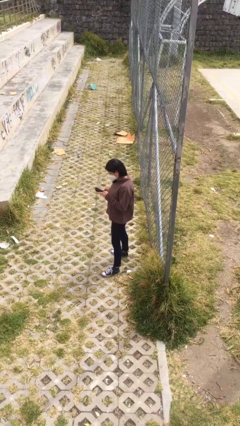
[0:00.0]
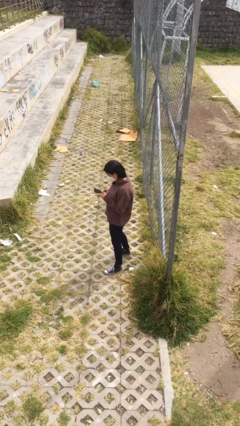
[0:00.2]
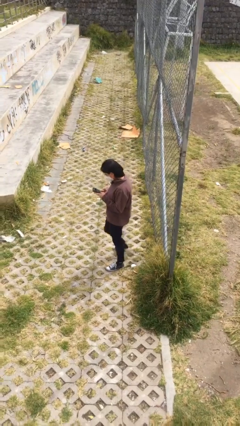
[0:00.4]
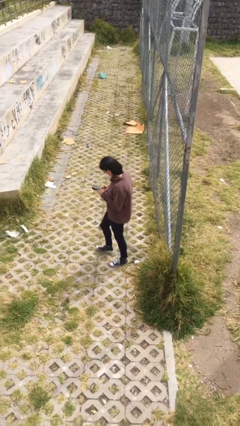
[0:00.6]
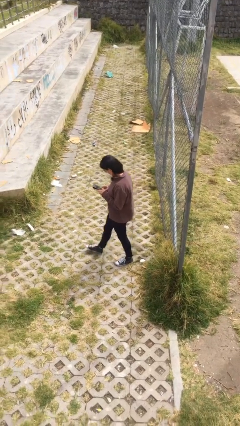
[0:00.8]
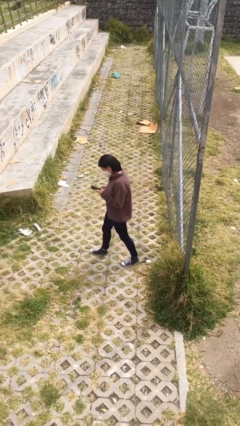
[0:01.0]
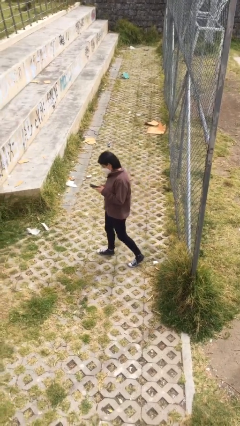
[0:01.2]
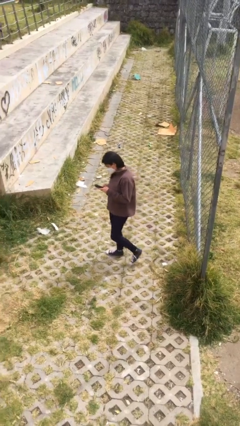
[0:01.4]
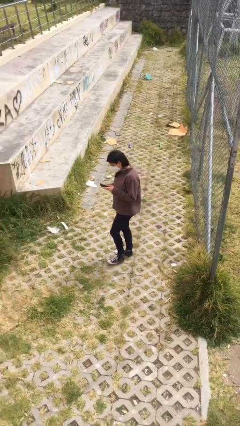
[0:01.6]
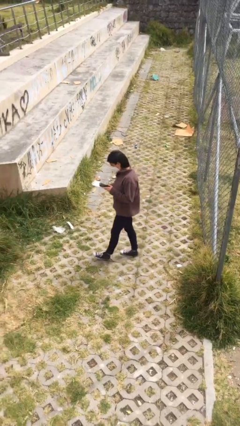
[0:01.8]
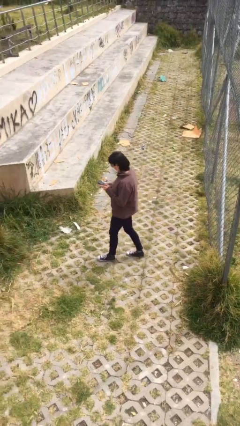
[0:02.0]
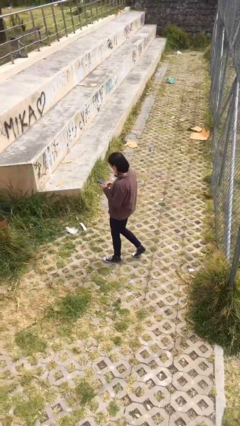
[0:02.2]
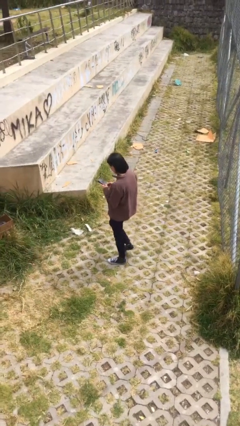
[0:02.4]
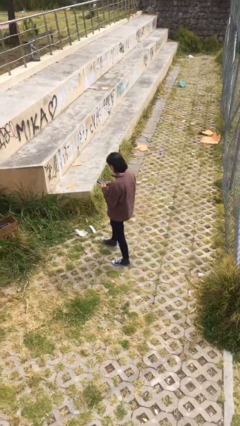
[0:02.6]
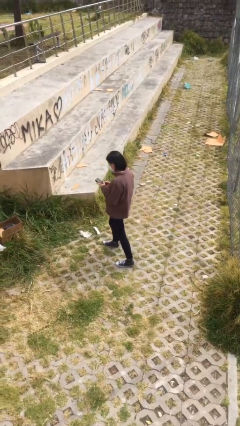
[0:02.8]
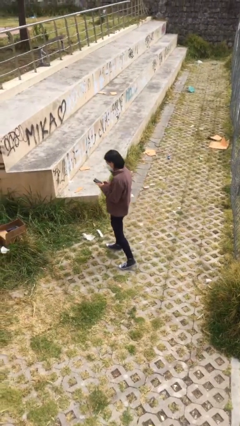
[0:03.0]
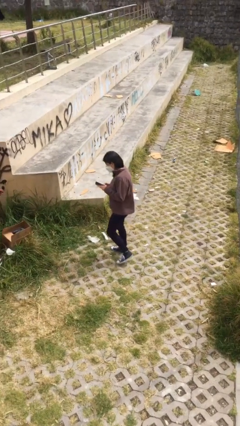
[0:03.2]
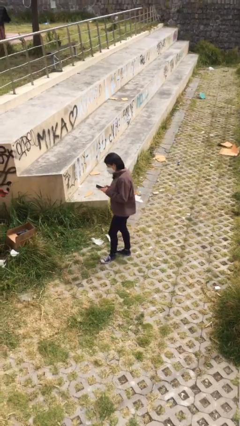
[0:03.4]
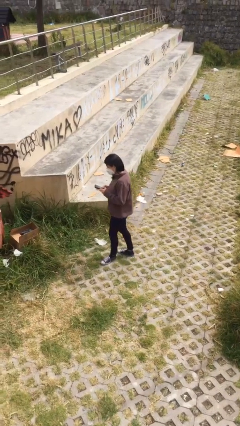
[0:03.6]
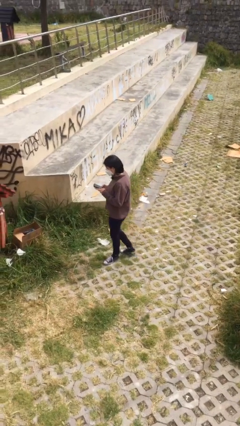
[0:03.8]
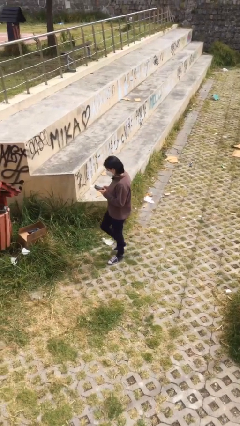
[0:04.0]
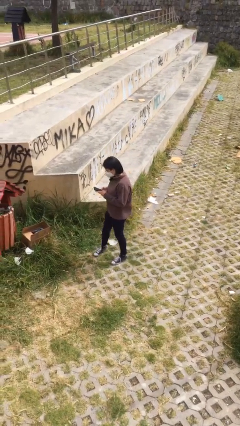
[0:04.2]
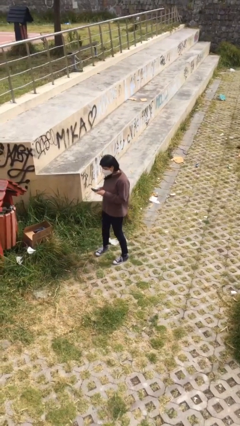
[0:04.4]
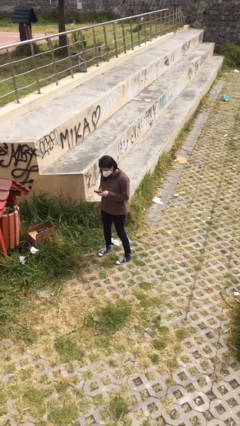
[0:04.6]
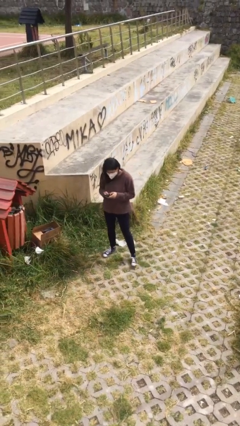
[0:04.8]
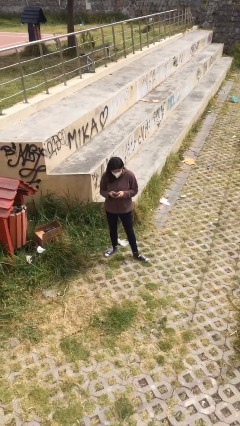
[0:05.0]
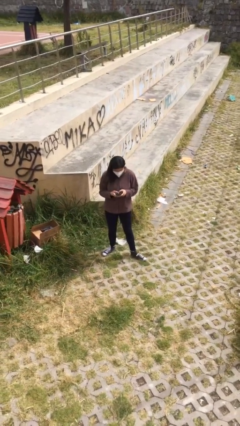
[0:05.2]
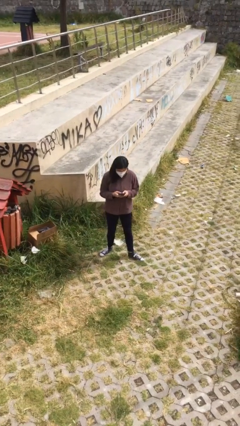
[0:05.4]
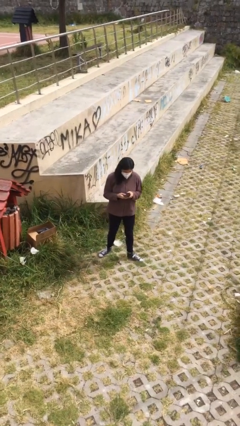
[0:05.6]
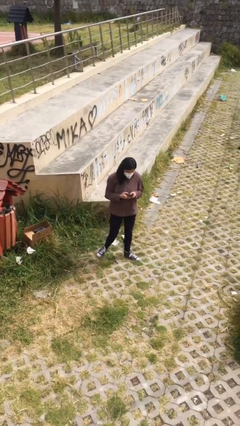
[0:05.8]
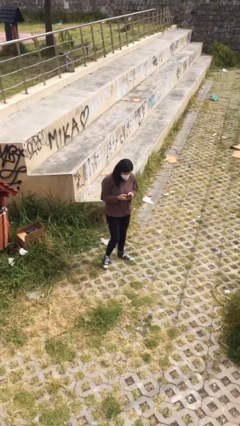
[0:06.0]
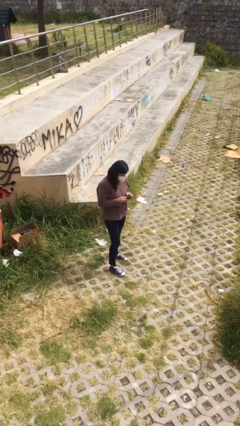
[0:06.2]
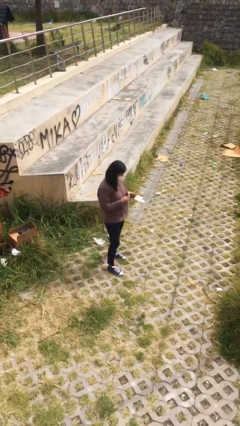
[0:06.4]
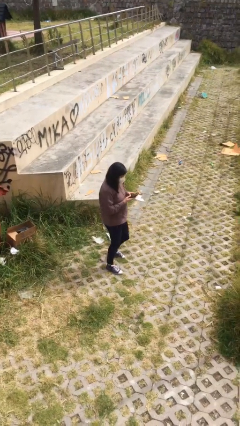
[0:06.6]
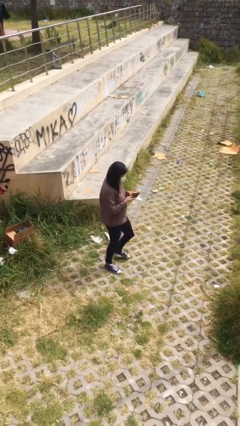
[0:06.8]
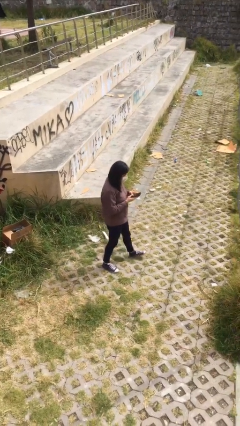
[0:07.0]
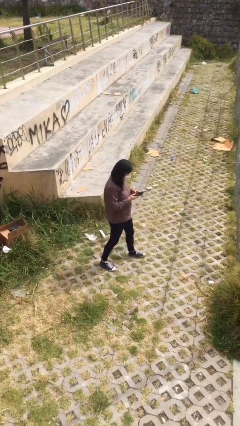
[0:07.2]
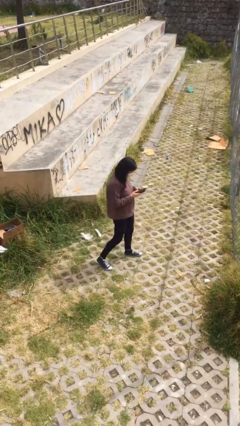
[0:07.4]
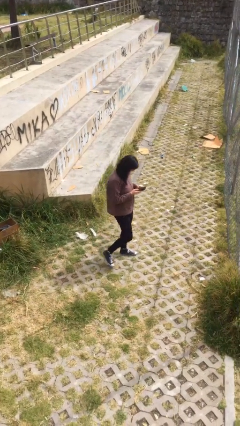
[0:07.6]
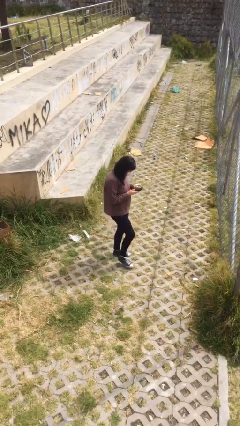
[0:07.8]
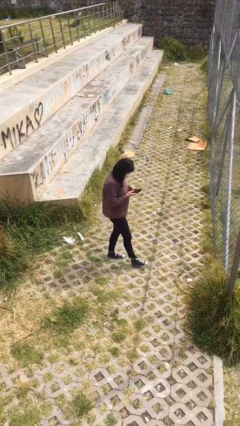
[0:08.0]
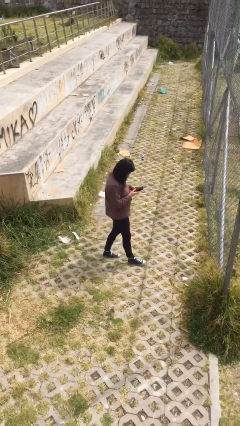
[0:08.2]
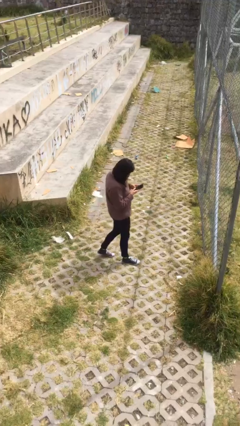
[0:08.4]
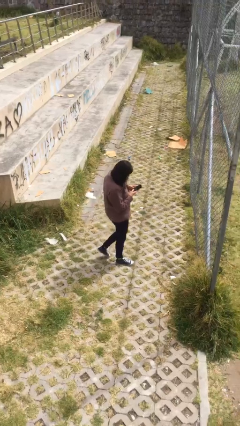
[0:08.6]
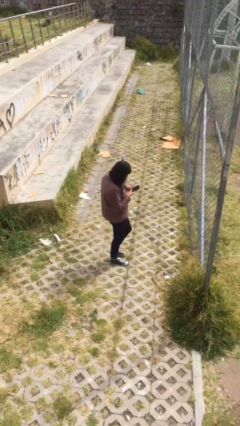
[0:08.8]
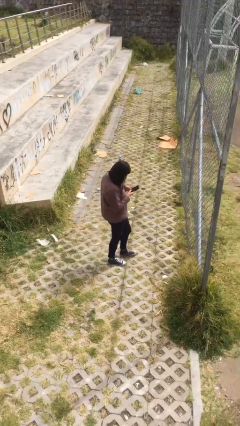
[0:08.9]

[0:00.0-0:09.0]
person texts on phone

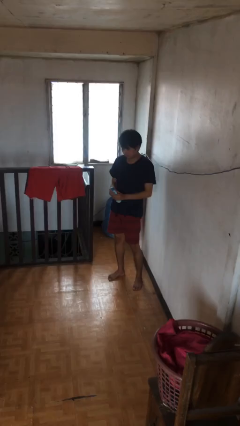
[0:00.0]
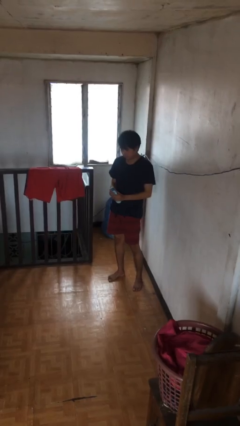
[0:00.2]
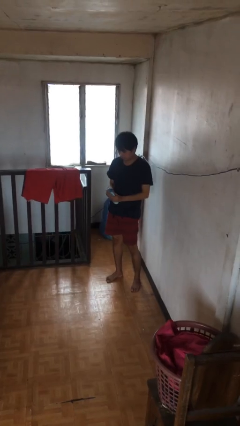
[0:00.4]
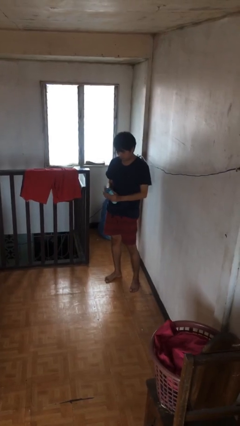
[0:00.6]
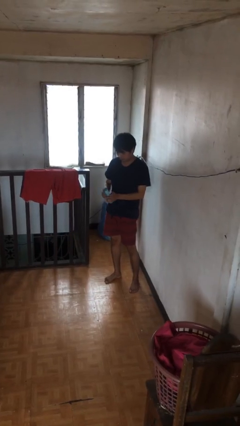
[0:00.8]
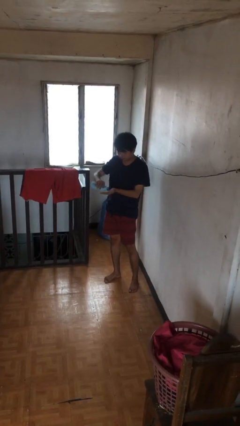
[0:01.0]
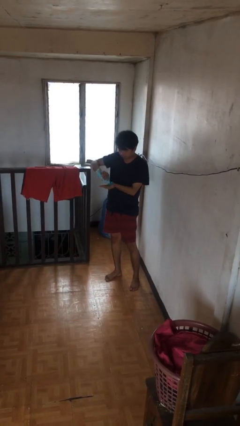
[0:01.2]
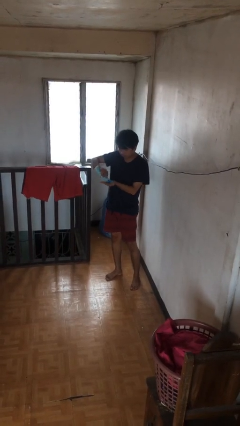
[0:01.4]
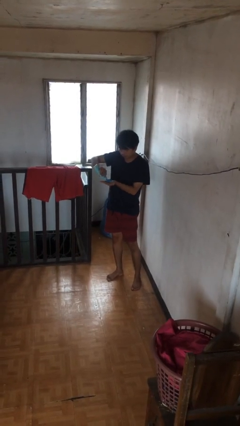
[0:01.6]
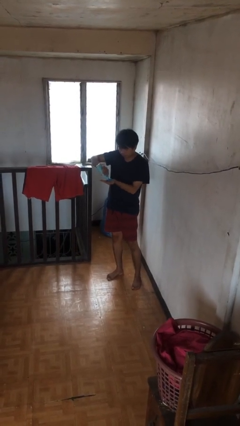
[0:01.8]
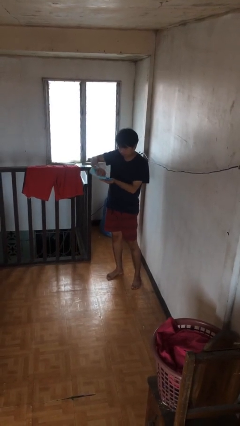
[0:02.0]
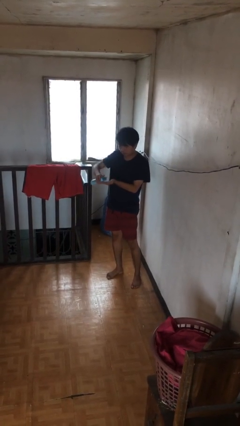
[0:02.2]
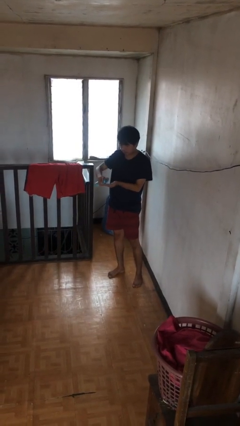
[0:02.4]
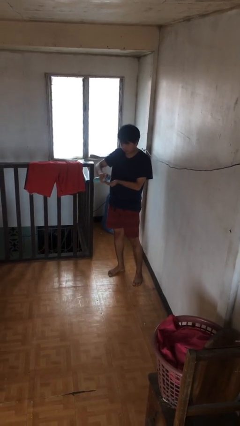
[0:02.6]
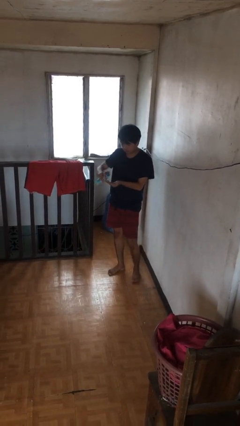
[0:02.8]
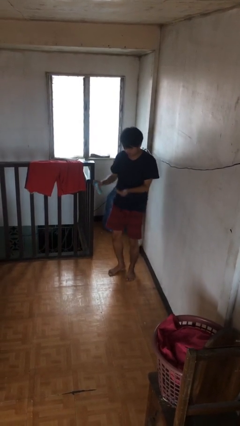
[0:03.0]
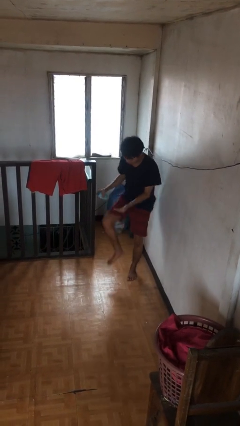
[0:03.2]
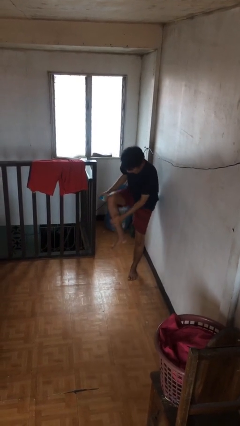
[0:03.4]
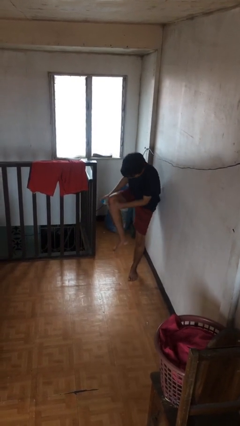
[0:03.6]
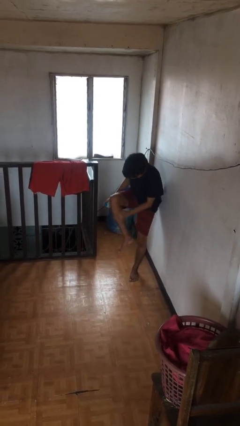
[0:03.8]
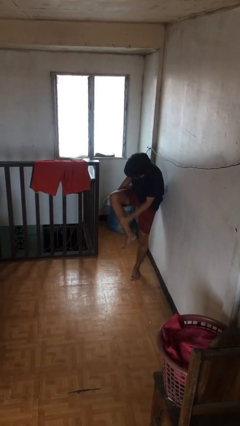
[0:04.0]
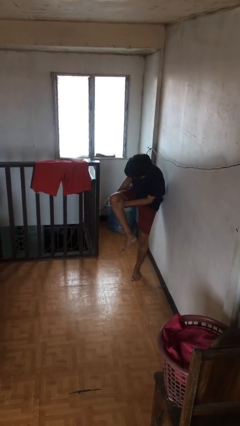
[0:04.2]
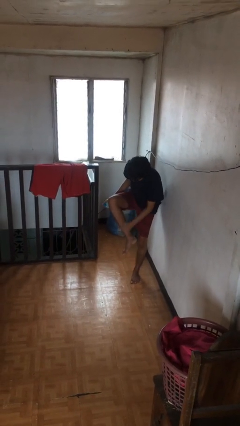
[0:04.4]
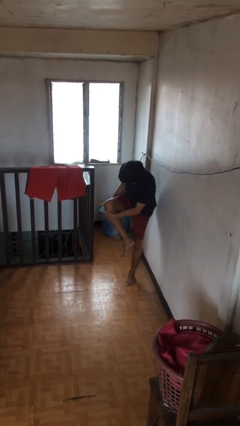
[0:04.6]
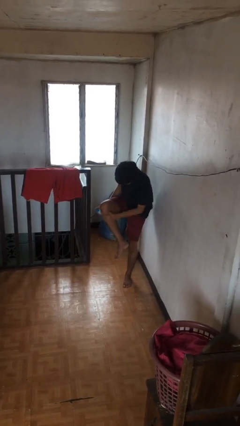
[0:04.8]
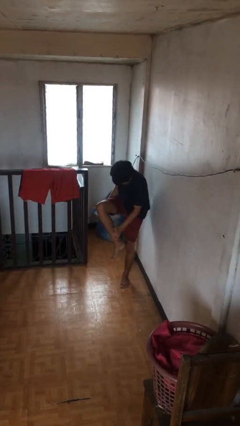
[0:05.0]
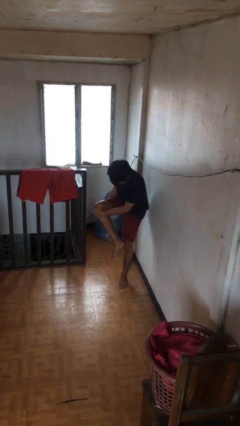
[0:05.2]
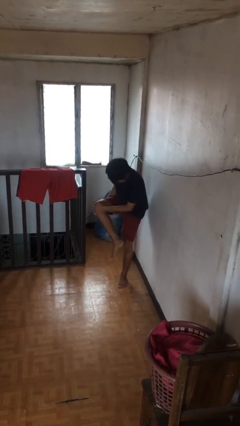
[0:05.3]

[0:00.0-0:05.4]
person applies sunscreen

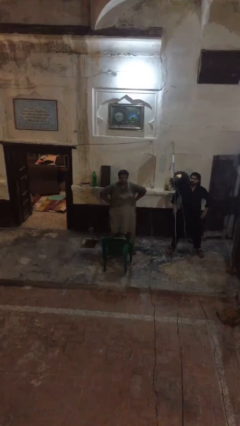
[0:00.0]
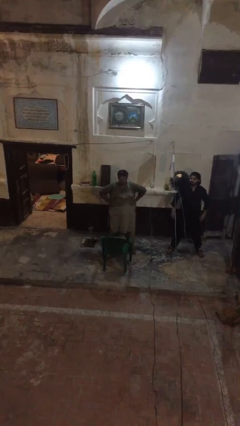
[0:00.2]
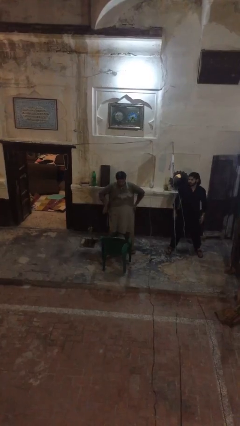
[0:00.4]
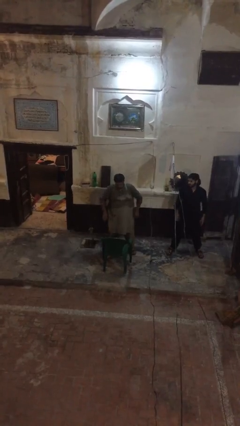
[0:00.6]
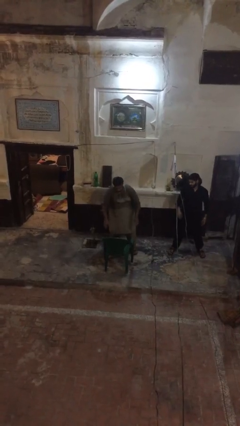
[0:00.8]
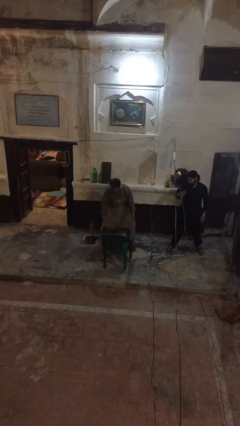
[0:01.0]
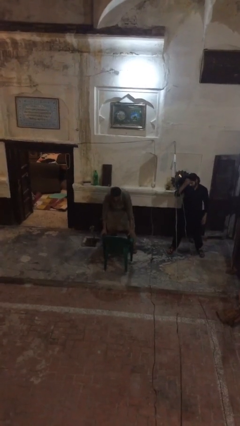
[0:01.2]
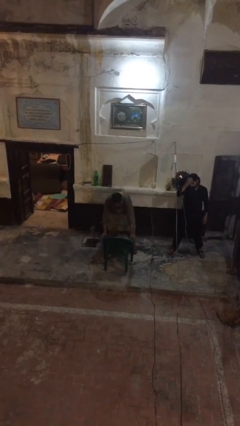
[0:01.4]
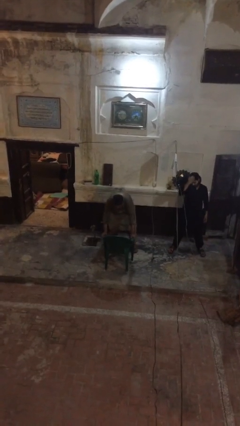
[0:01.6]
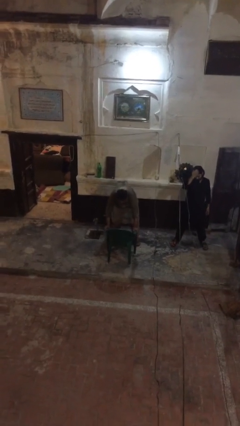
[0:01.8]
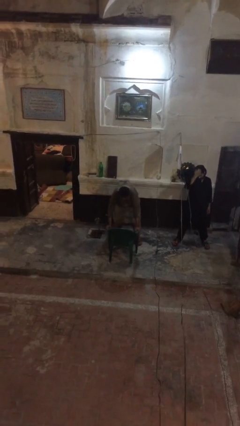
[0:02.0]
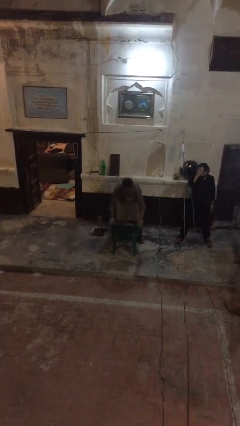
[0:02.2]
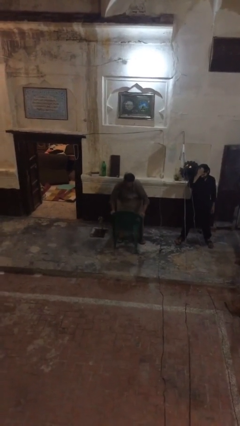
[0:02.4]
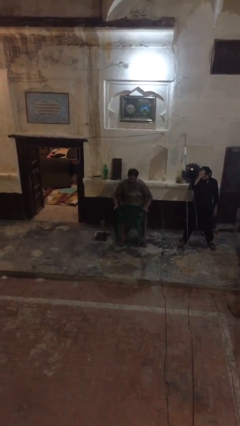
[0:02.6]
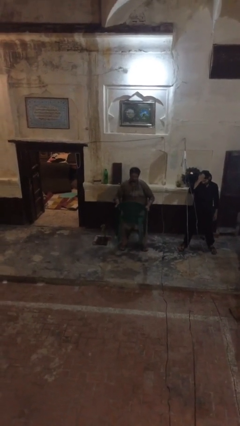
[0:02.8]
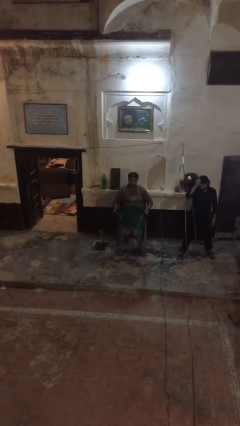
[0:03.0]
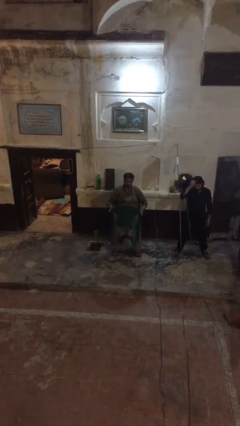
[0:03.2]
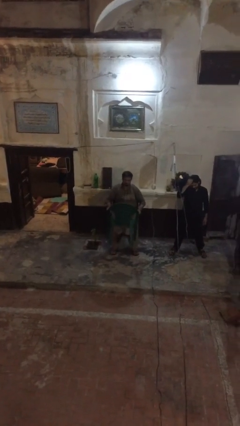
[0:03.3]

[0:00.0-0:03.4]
person picks up object from floor
